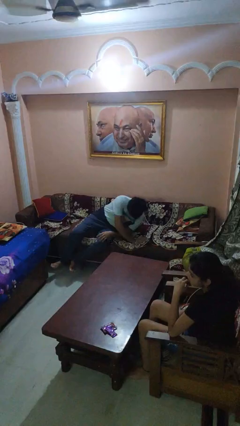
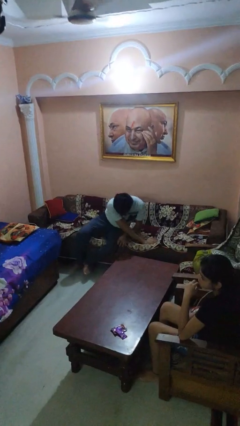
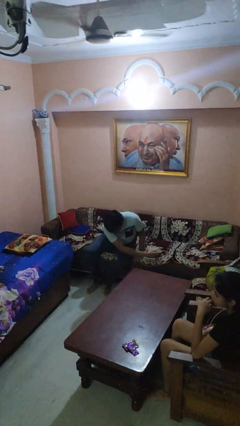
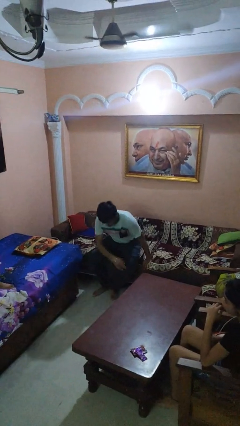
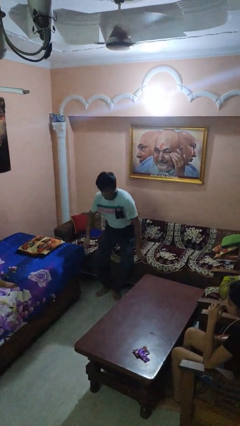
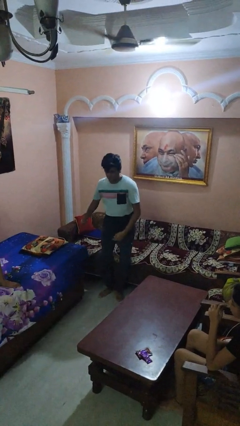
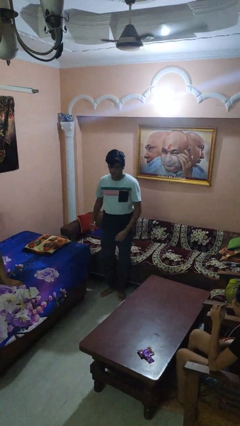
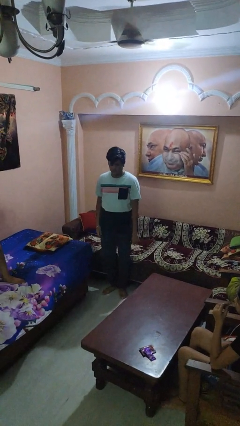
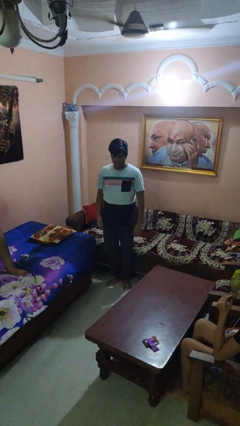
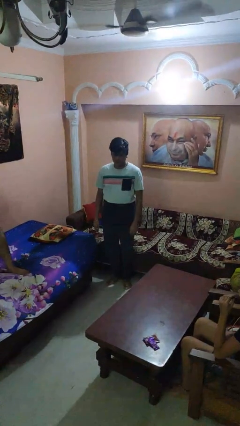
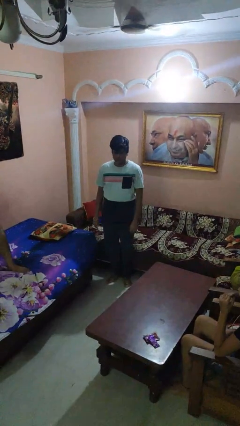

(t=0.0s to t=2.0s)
person stands up

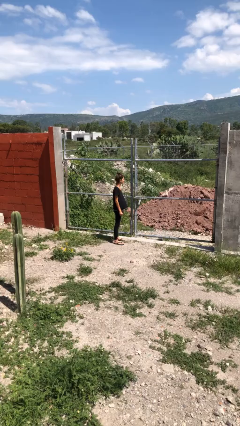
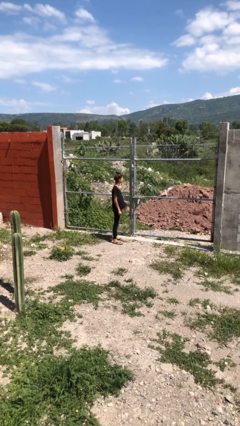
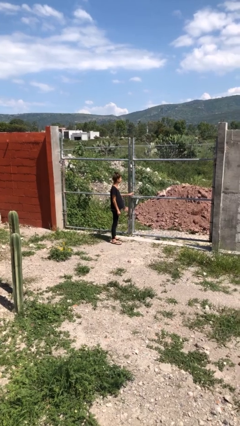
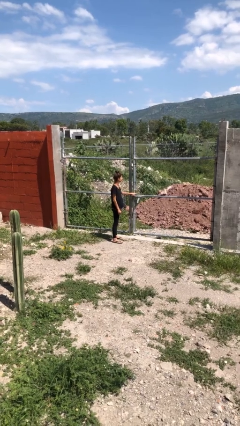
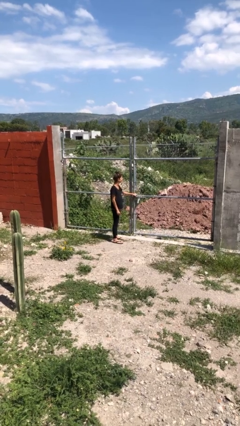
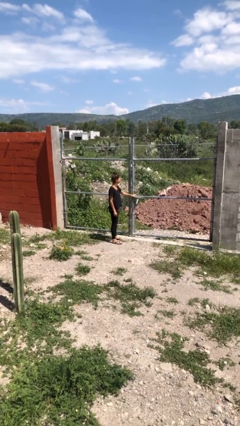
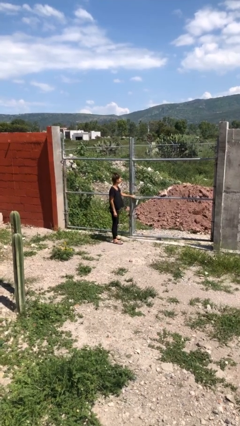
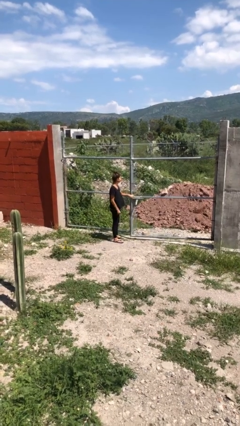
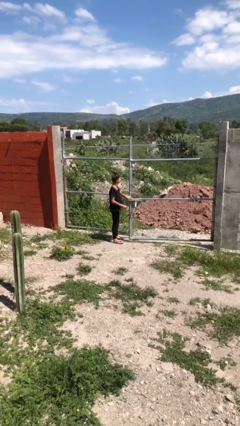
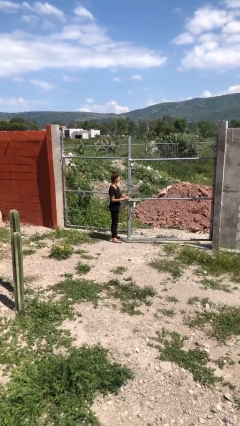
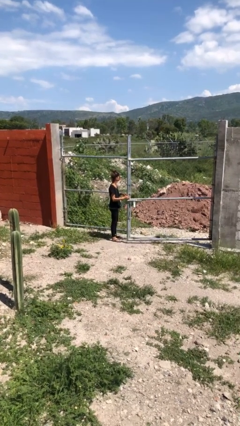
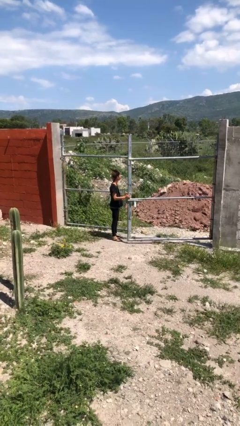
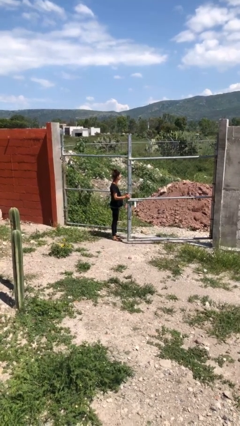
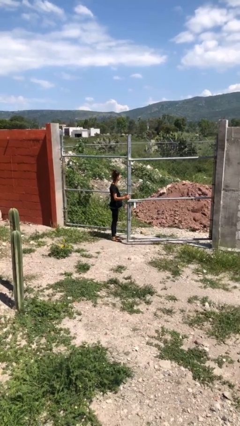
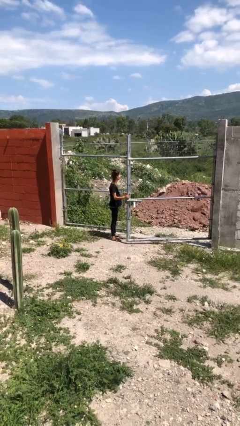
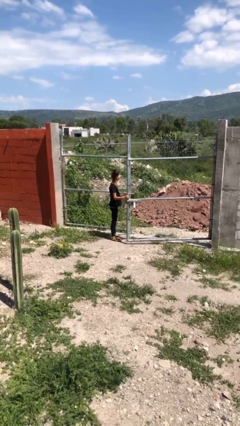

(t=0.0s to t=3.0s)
person opens gate

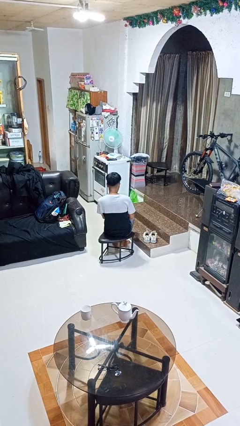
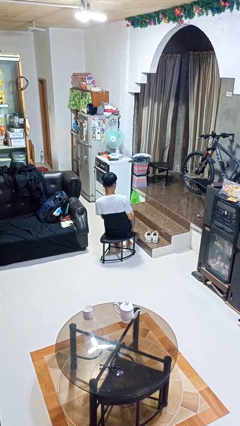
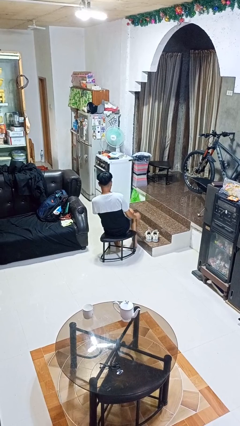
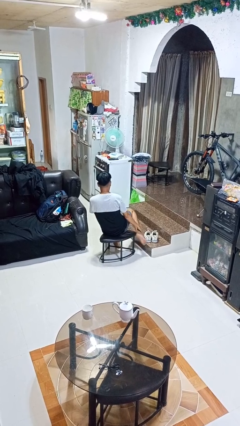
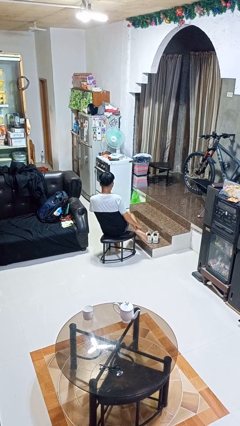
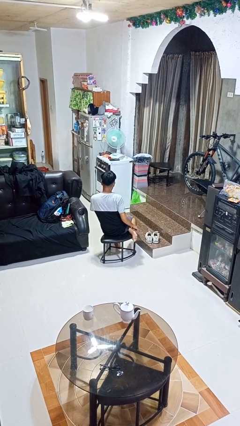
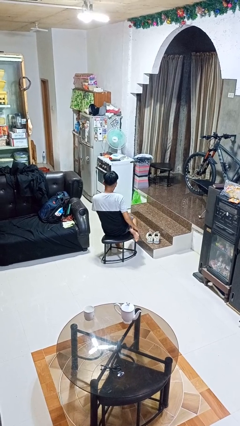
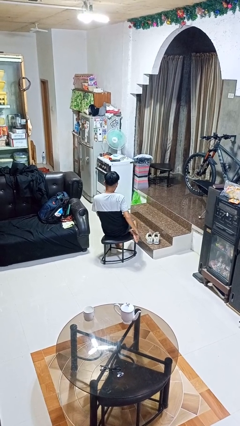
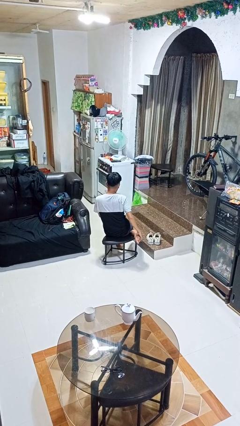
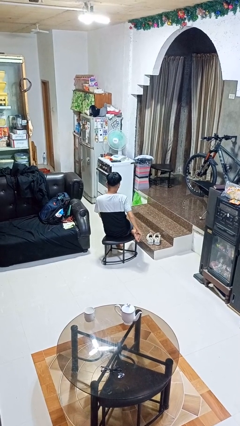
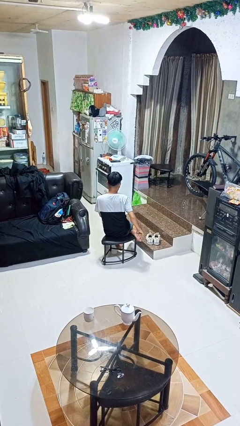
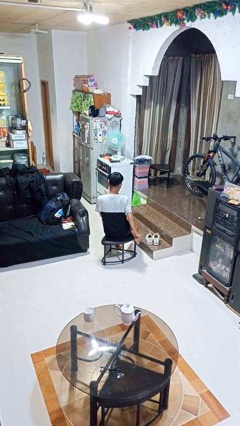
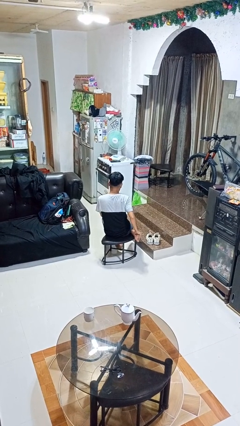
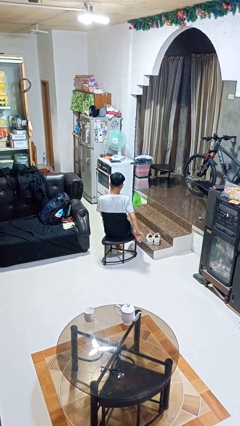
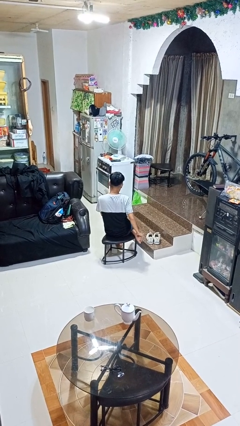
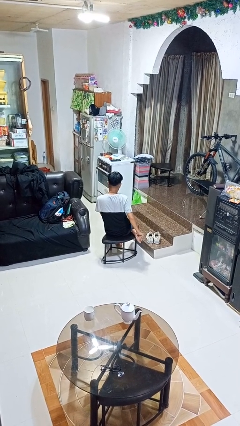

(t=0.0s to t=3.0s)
person rubs foot

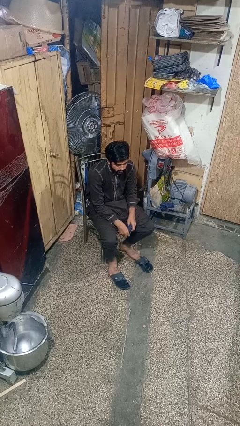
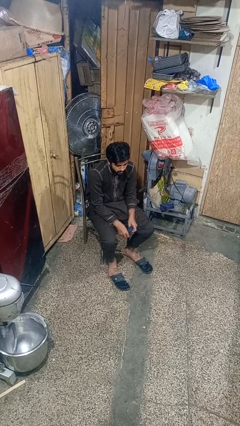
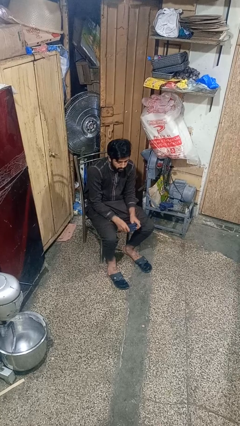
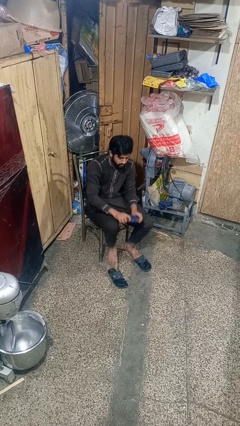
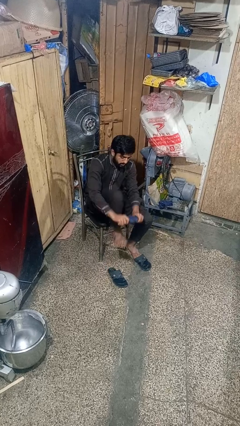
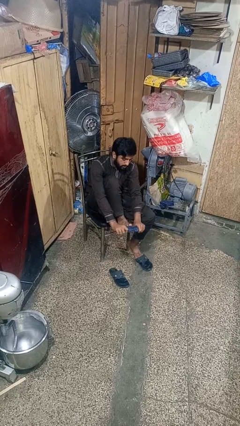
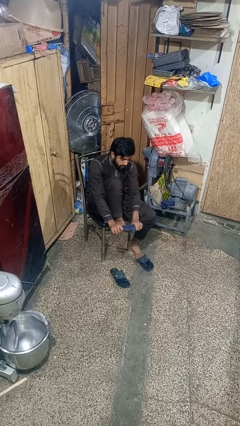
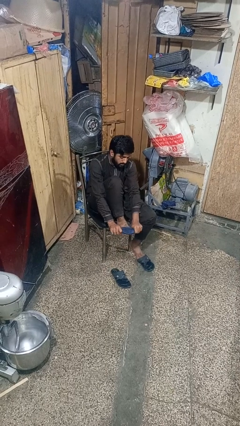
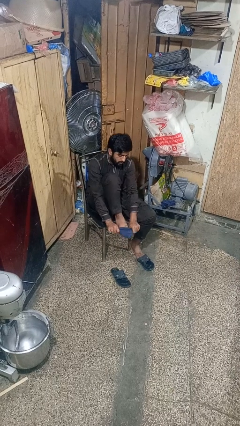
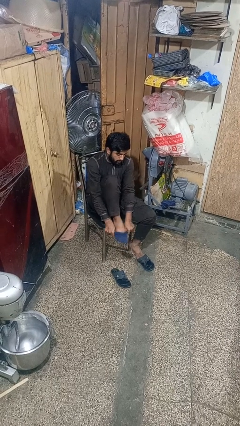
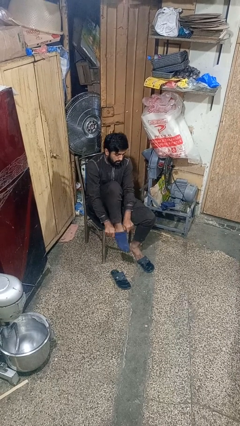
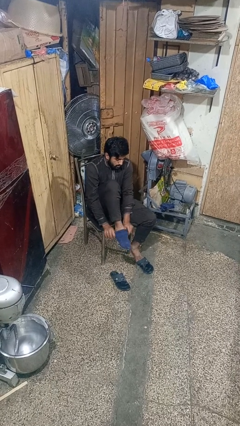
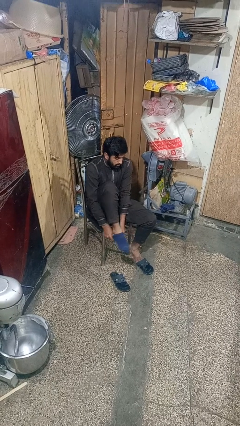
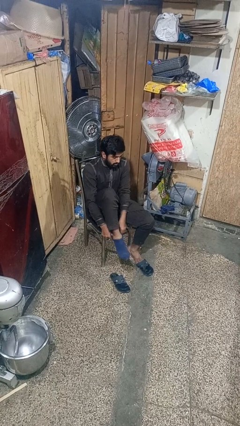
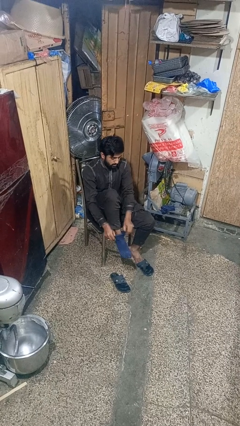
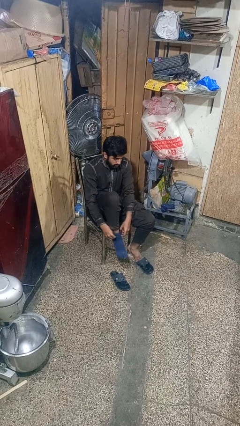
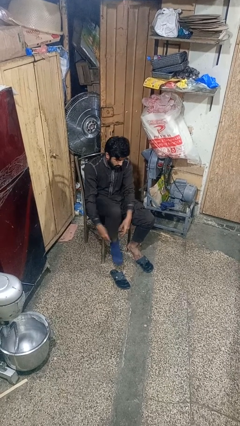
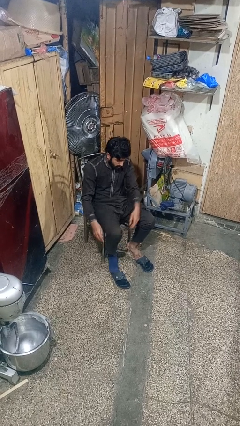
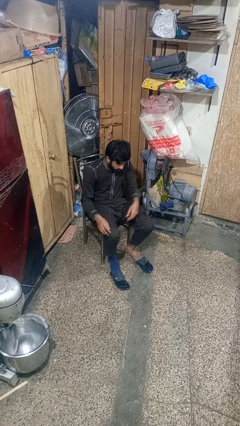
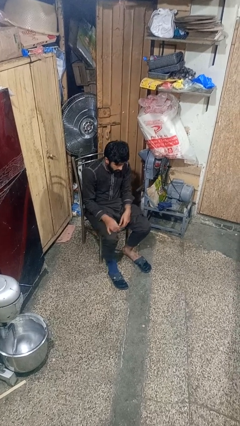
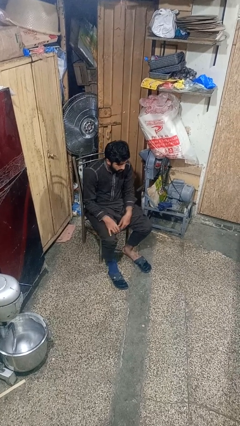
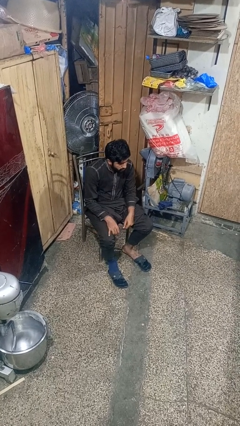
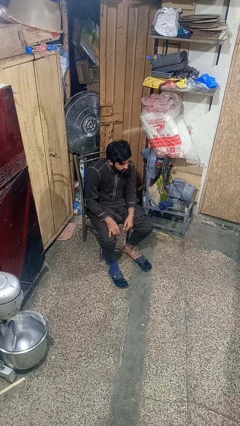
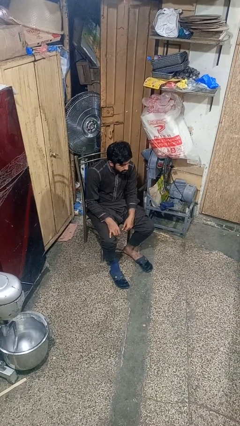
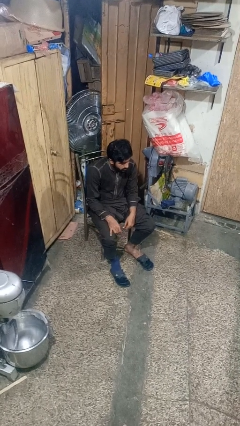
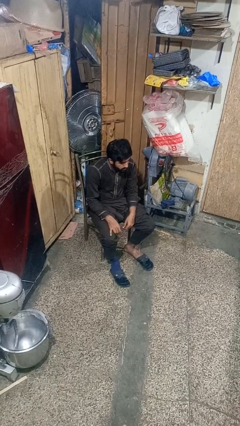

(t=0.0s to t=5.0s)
person puts on socks

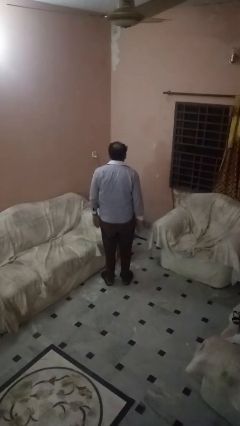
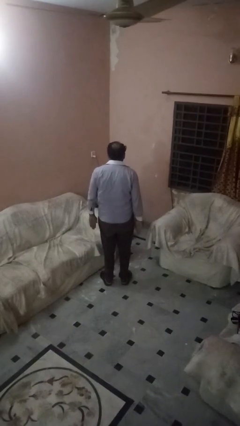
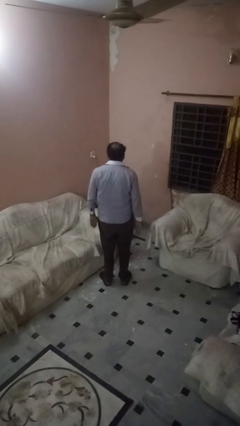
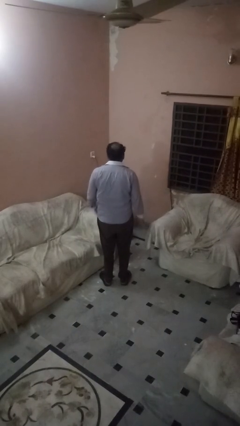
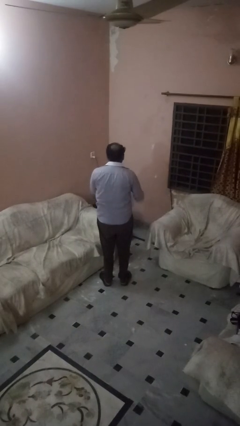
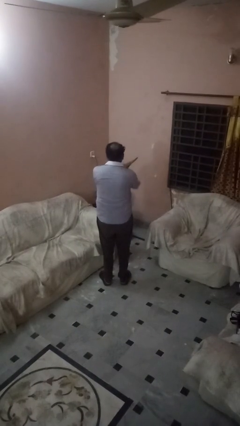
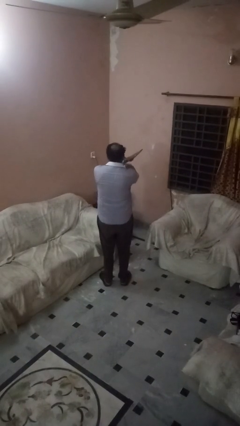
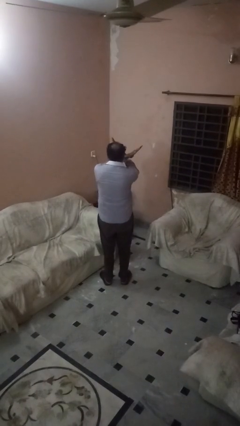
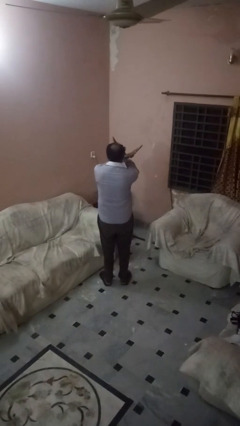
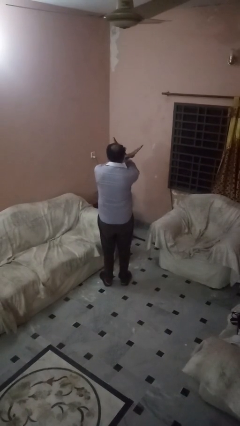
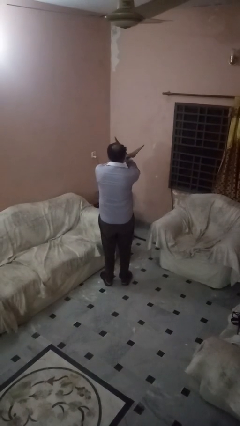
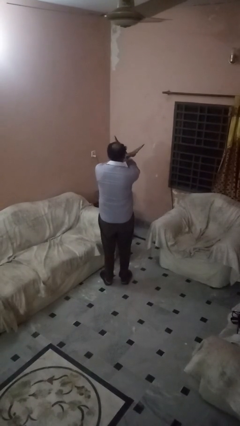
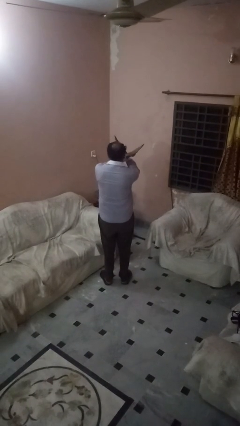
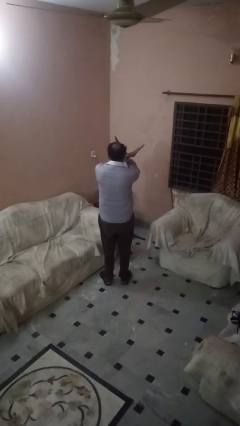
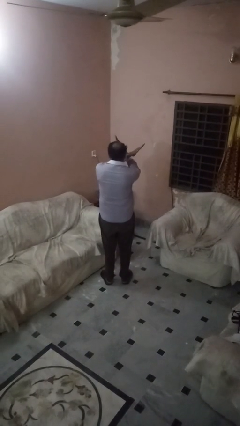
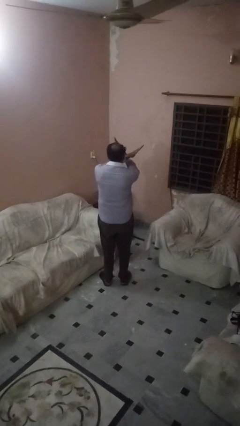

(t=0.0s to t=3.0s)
person gestures arms x

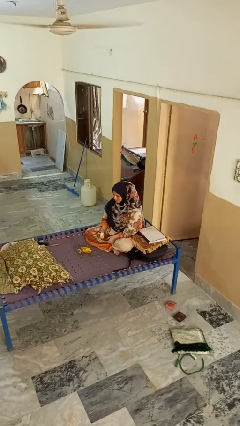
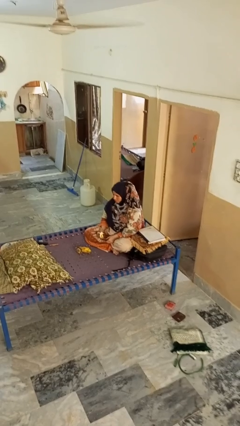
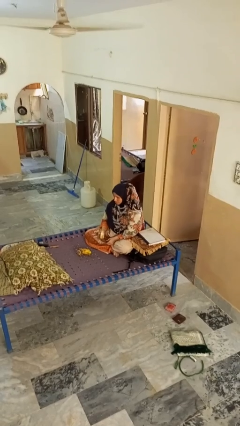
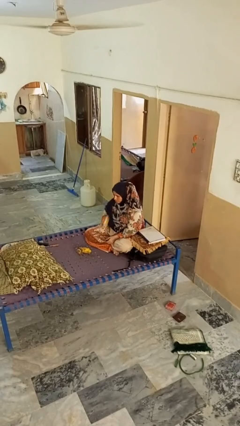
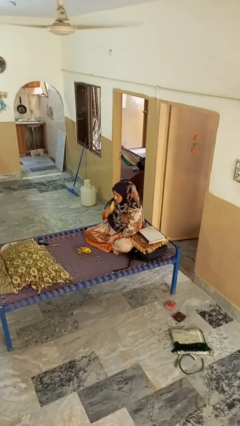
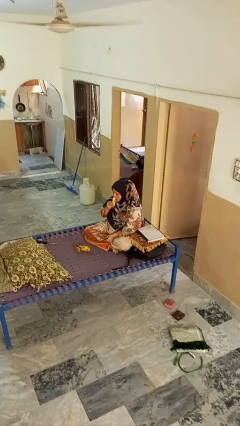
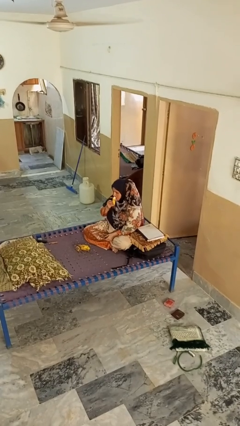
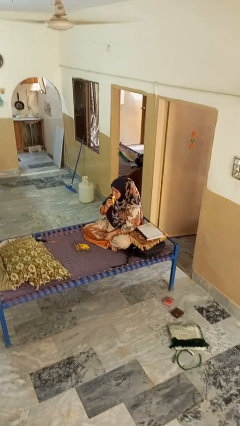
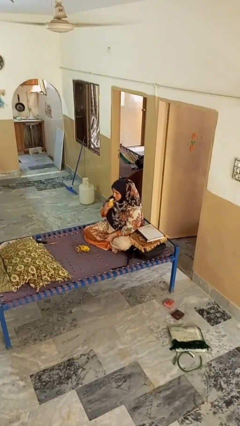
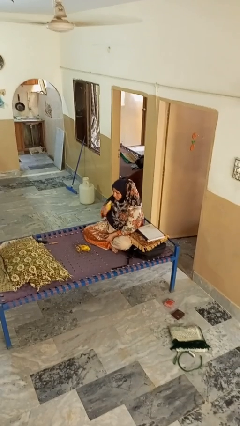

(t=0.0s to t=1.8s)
person eats banana
